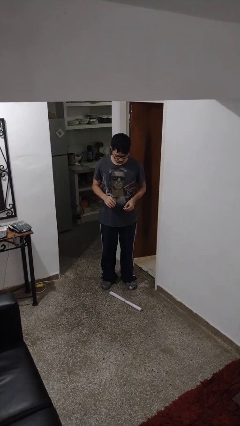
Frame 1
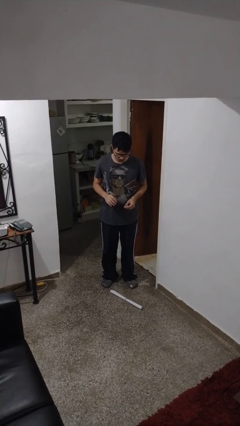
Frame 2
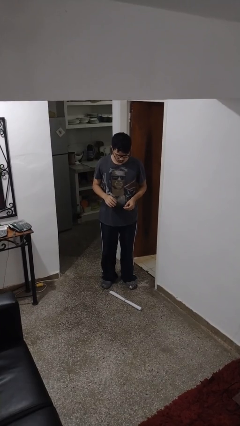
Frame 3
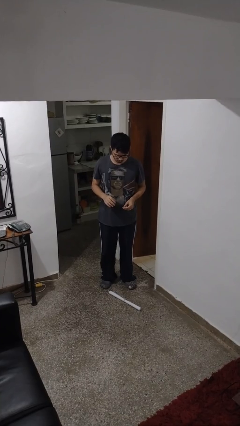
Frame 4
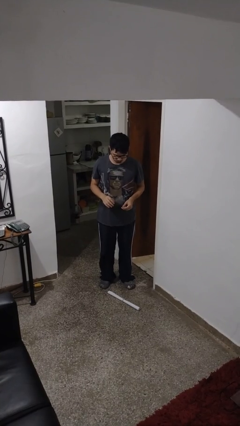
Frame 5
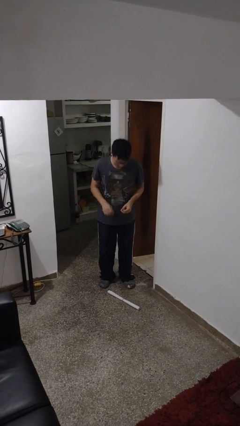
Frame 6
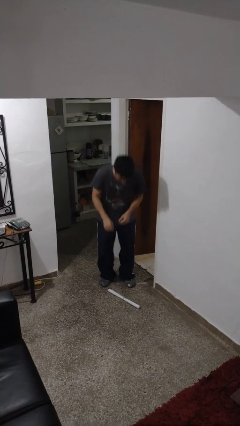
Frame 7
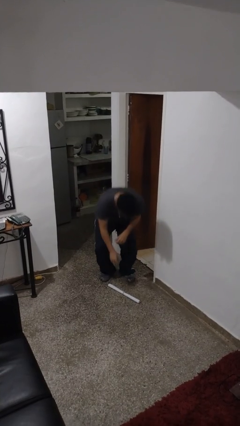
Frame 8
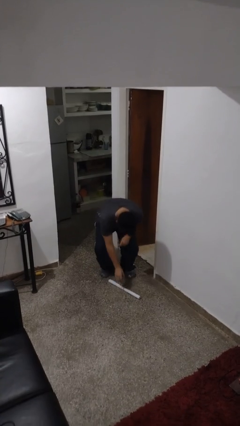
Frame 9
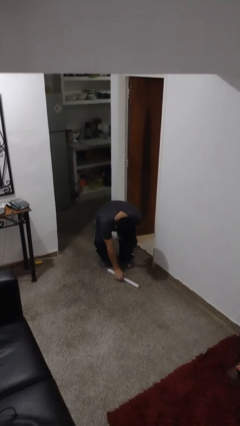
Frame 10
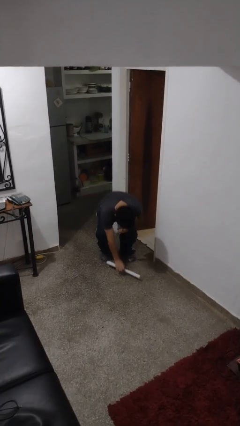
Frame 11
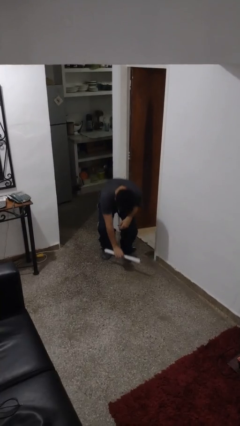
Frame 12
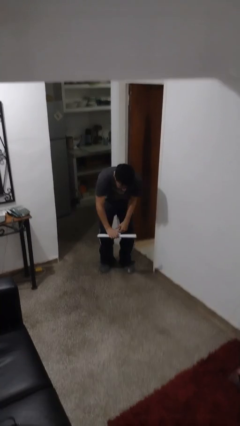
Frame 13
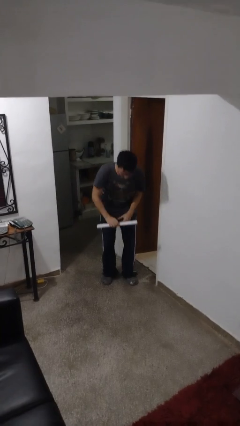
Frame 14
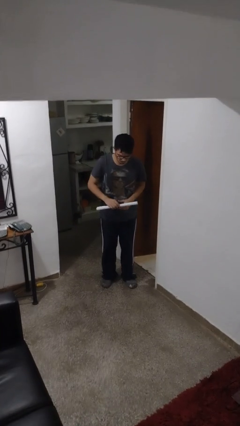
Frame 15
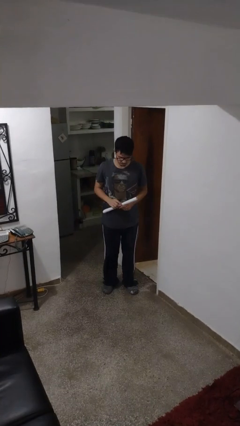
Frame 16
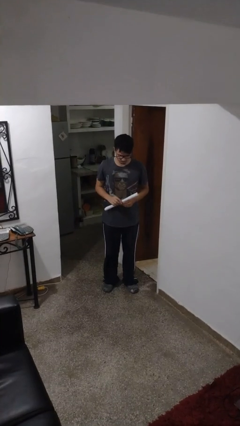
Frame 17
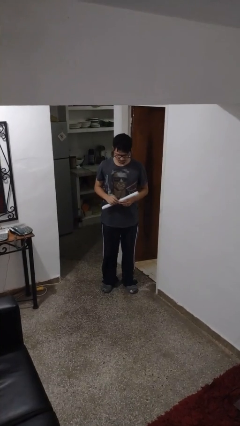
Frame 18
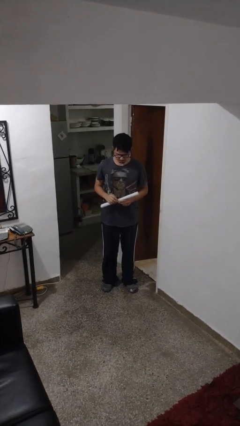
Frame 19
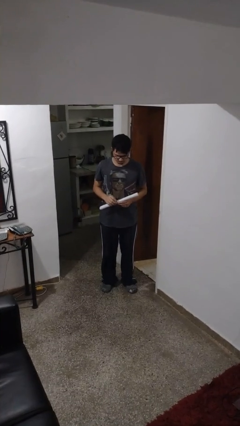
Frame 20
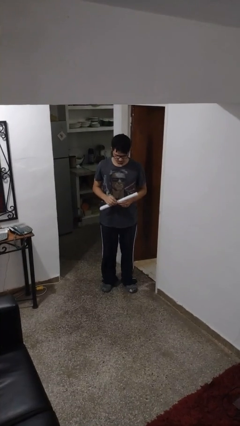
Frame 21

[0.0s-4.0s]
person picks up object from floor

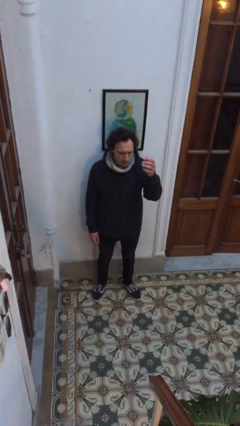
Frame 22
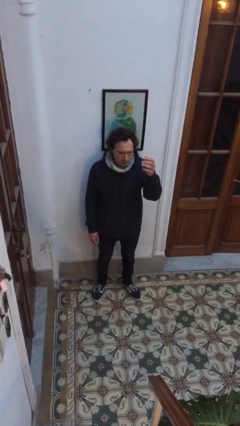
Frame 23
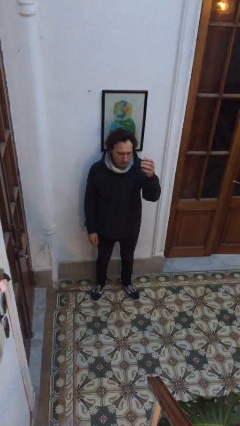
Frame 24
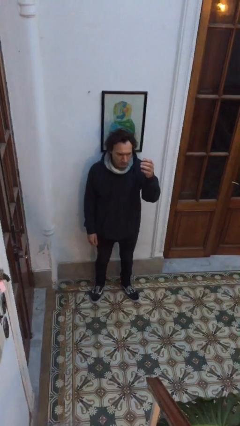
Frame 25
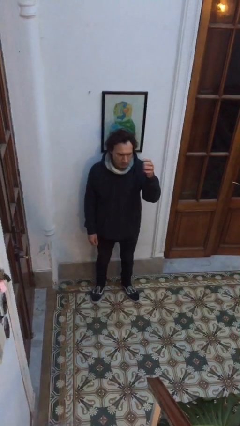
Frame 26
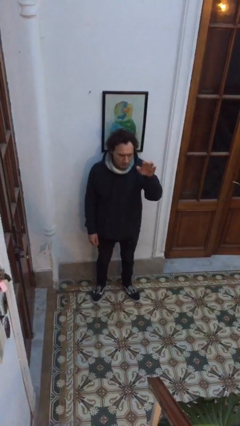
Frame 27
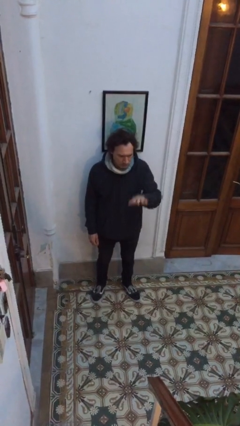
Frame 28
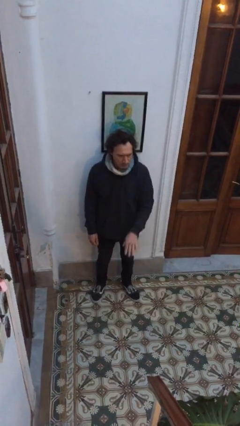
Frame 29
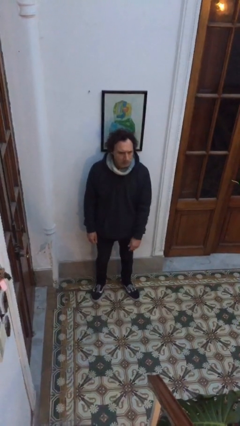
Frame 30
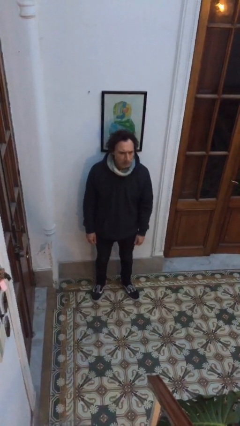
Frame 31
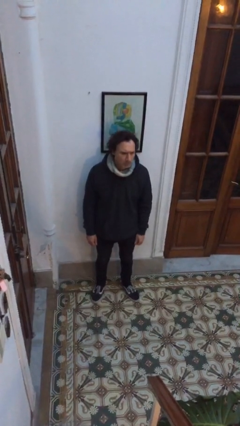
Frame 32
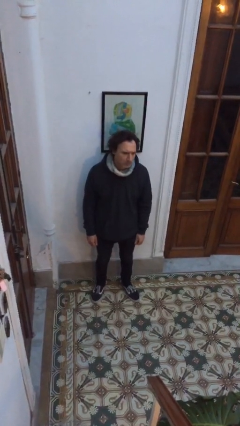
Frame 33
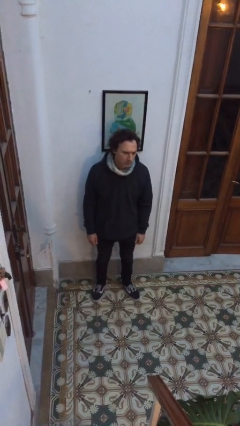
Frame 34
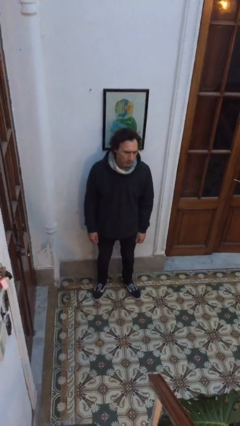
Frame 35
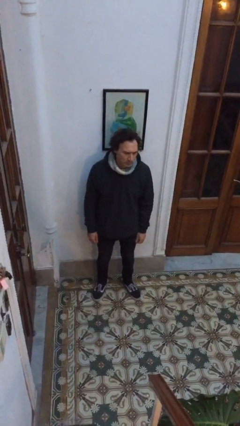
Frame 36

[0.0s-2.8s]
person gestures swipe down

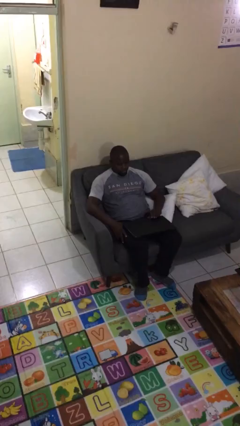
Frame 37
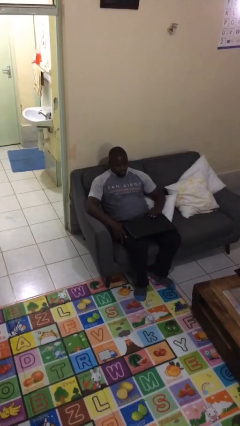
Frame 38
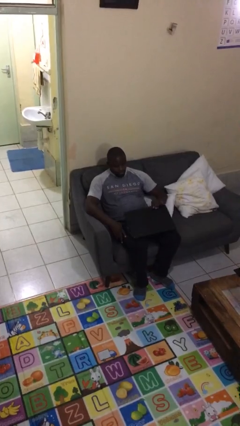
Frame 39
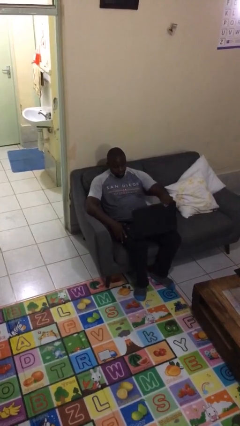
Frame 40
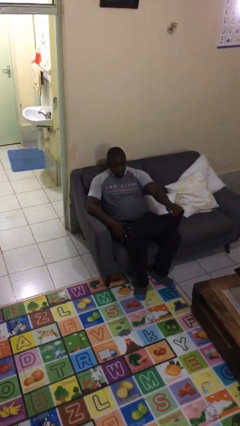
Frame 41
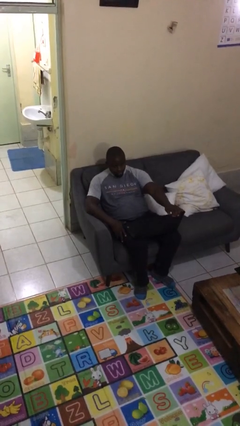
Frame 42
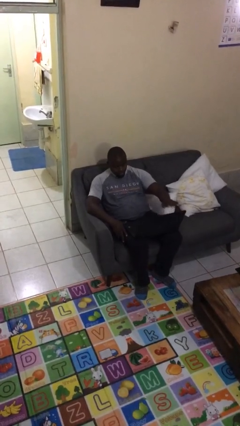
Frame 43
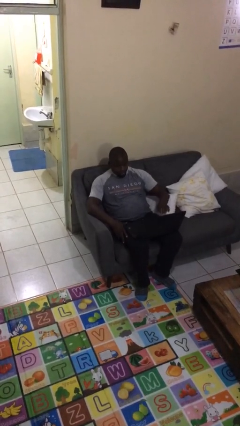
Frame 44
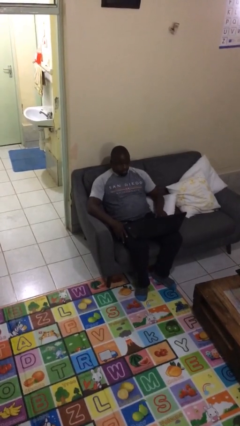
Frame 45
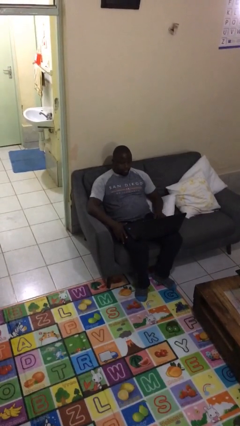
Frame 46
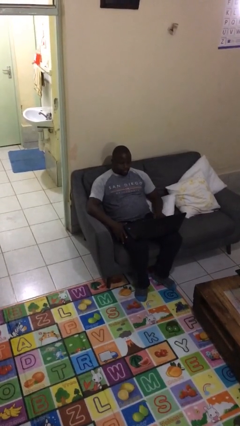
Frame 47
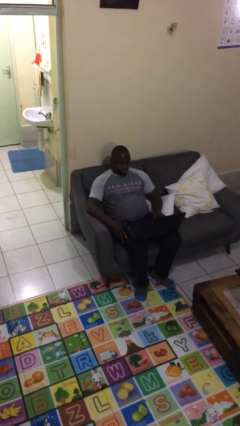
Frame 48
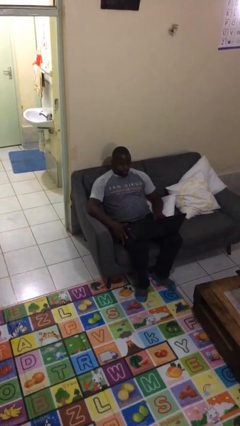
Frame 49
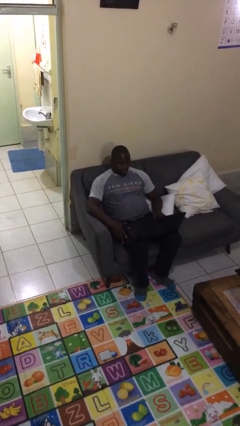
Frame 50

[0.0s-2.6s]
person opens laptop

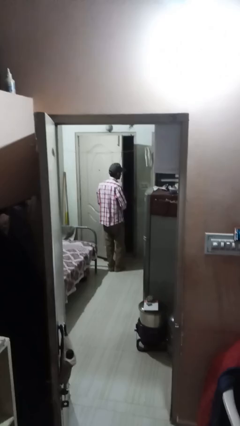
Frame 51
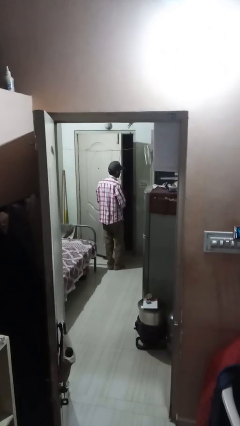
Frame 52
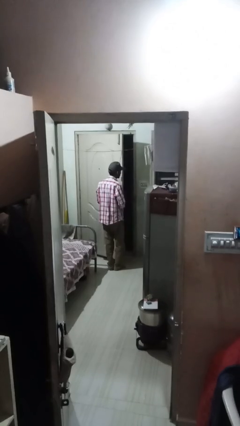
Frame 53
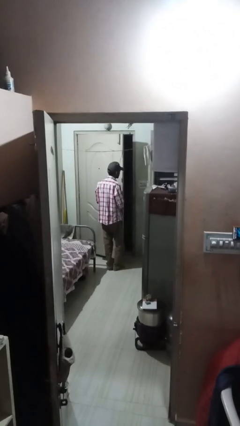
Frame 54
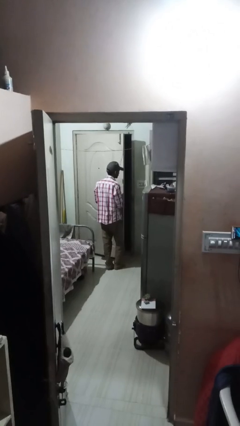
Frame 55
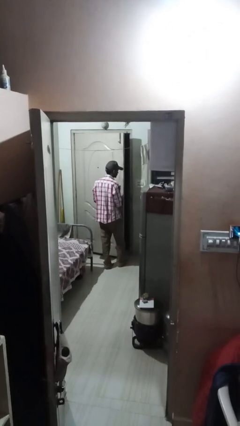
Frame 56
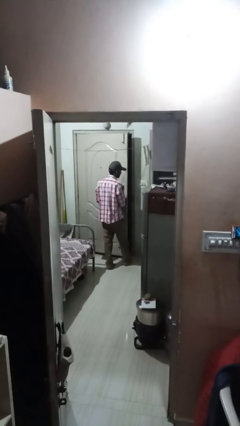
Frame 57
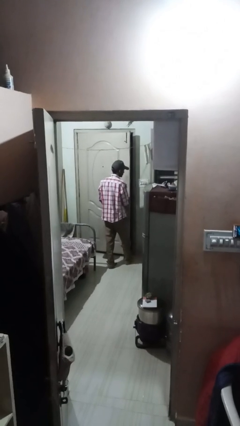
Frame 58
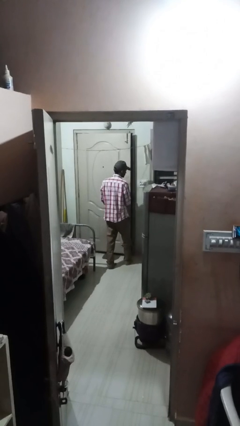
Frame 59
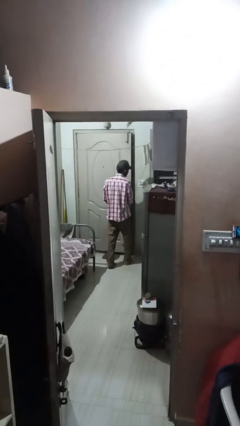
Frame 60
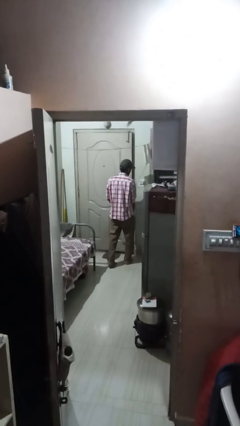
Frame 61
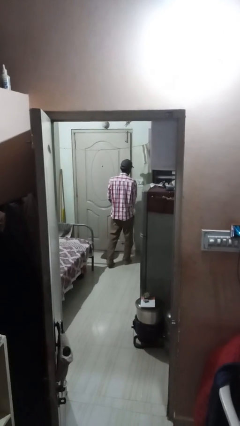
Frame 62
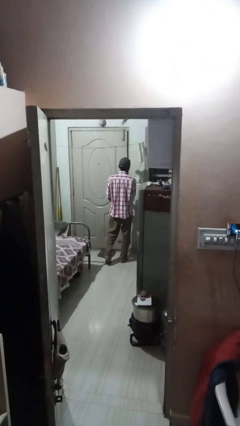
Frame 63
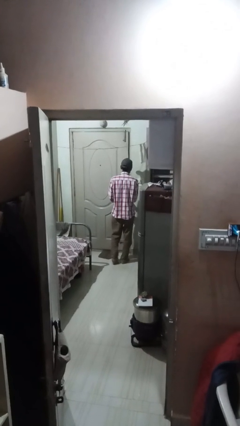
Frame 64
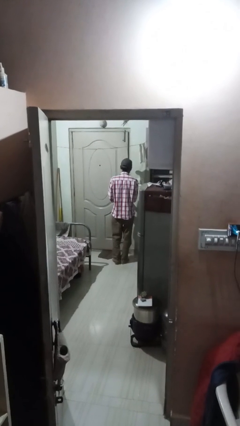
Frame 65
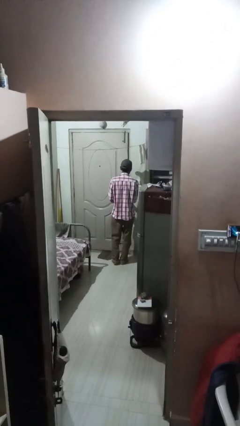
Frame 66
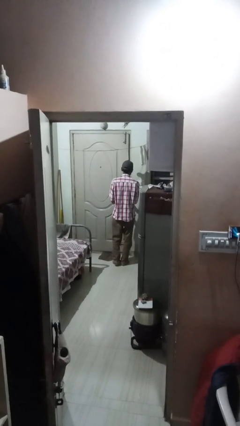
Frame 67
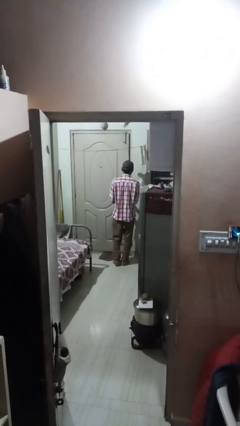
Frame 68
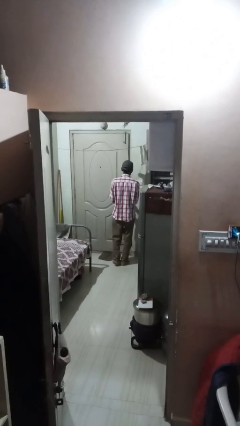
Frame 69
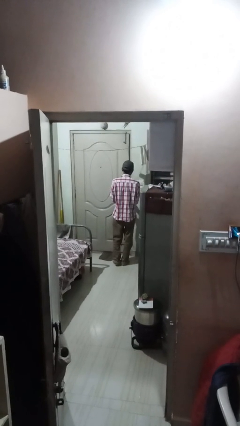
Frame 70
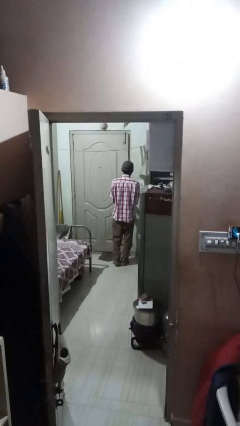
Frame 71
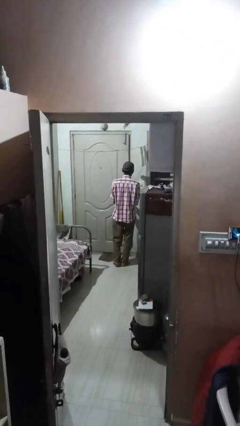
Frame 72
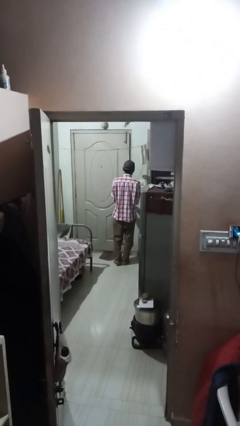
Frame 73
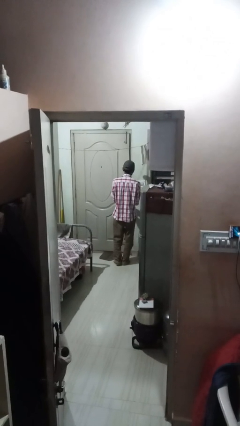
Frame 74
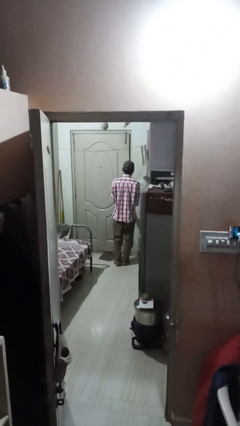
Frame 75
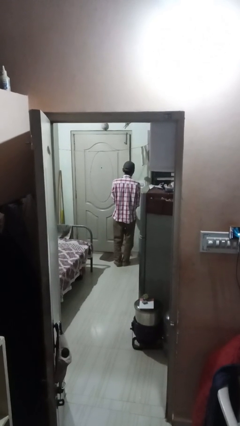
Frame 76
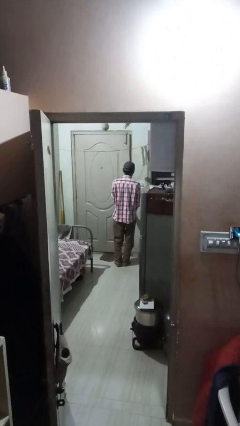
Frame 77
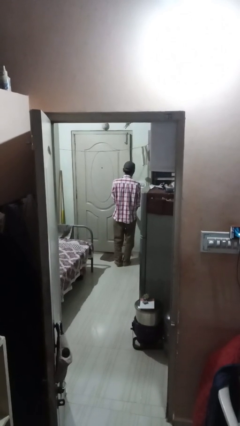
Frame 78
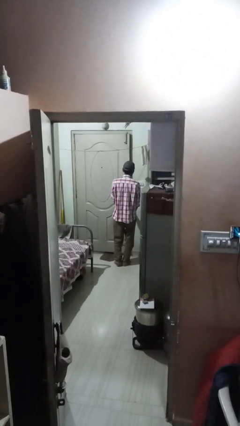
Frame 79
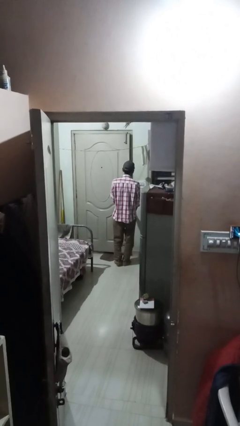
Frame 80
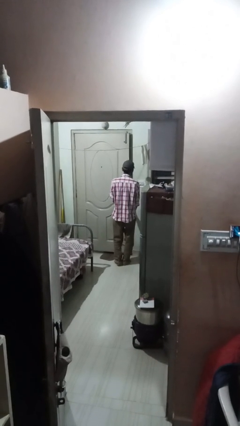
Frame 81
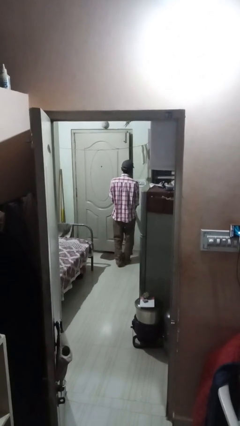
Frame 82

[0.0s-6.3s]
person closes facility door

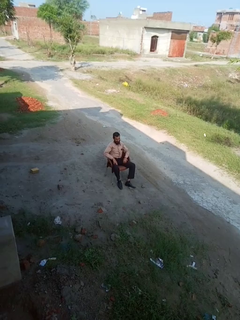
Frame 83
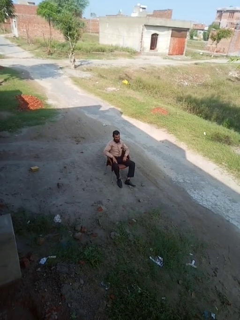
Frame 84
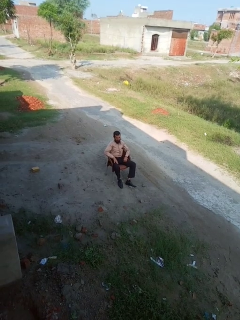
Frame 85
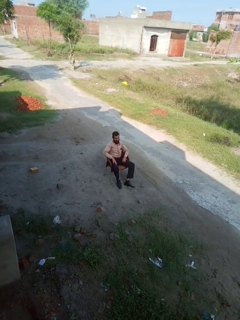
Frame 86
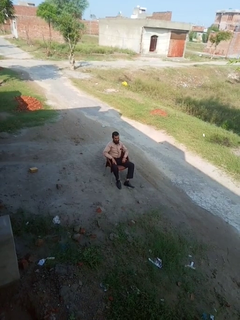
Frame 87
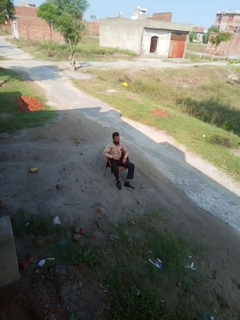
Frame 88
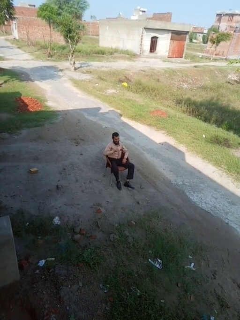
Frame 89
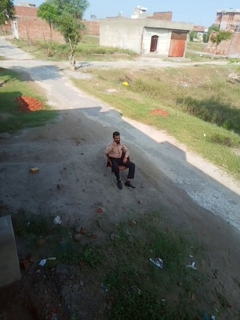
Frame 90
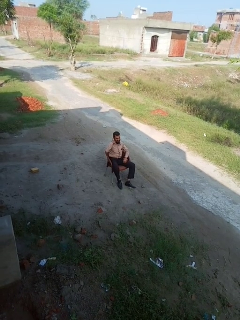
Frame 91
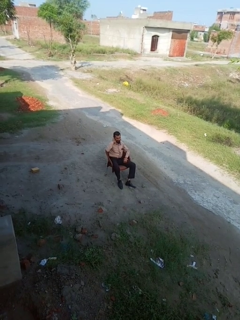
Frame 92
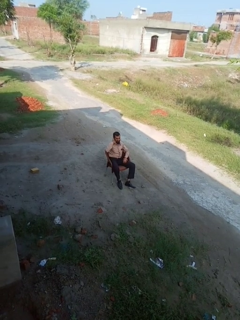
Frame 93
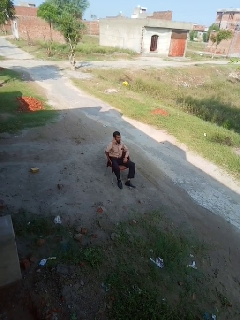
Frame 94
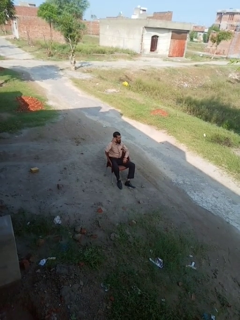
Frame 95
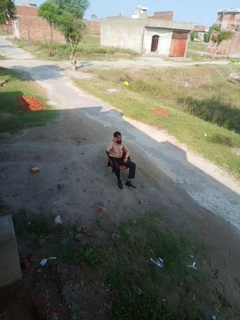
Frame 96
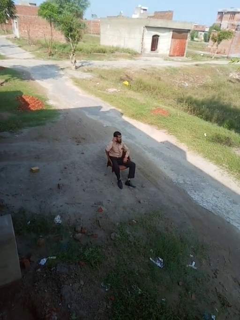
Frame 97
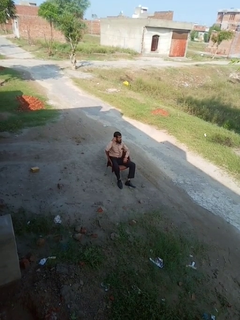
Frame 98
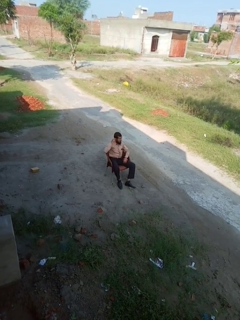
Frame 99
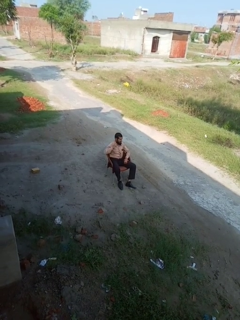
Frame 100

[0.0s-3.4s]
person gestures call me
